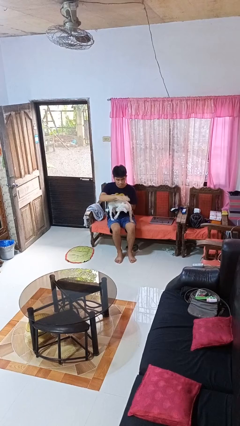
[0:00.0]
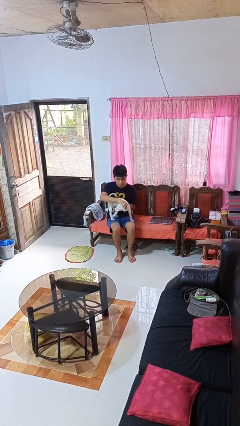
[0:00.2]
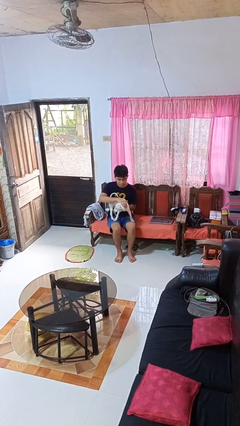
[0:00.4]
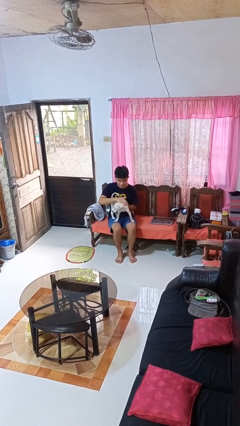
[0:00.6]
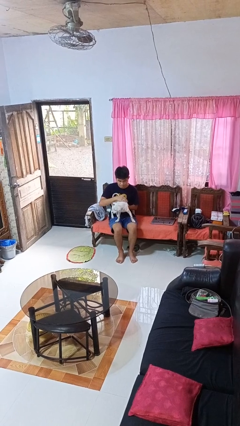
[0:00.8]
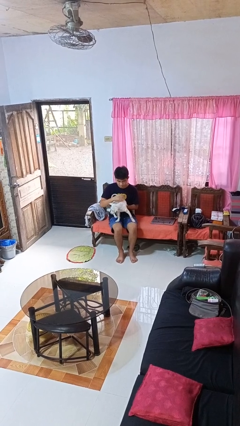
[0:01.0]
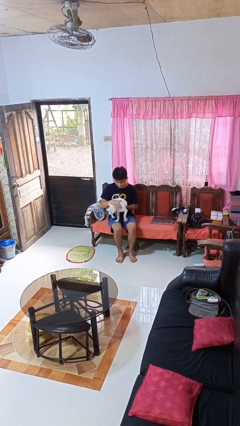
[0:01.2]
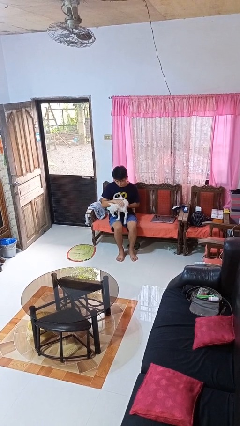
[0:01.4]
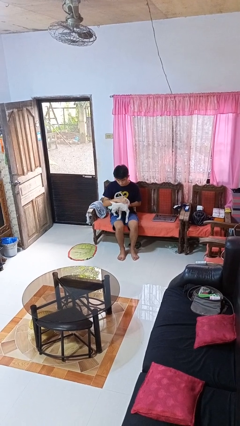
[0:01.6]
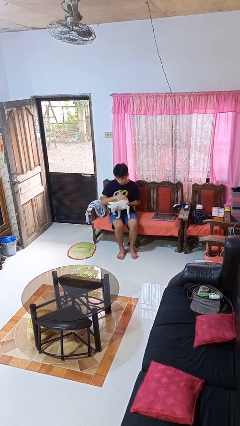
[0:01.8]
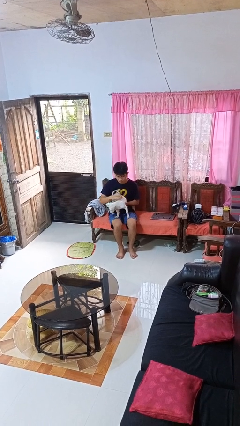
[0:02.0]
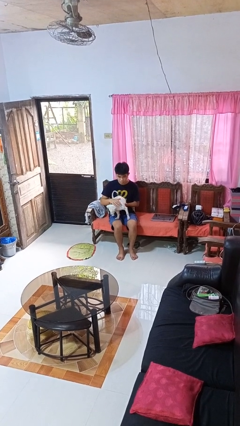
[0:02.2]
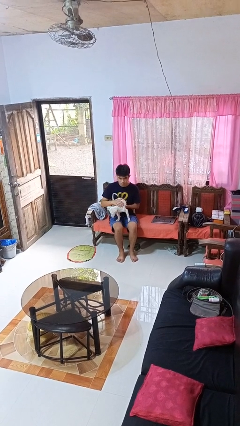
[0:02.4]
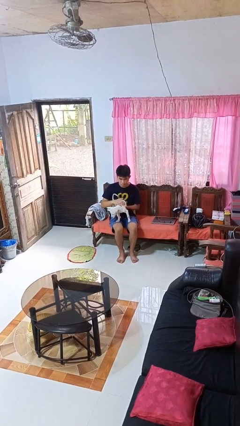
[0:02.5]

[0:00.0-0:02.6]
person pets dog

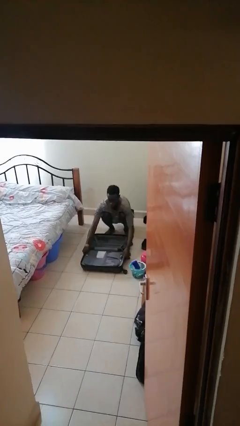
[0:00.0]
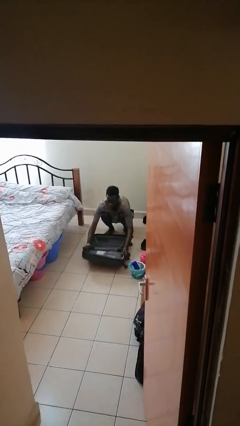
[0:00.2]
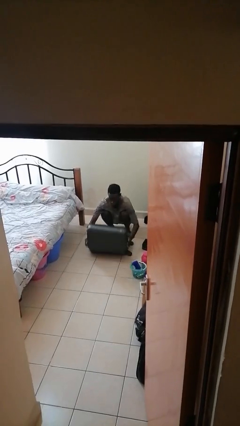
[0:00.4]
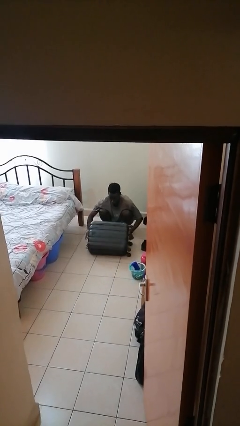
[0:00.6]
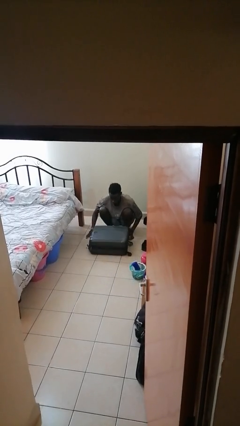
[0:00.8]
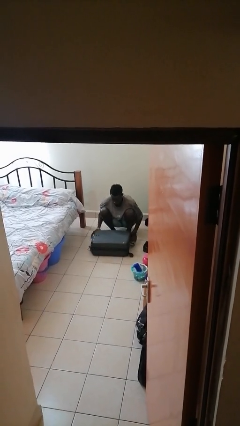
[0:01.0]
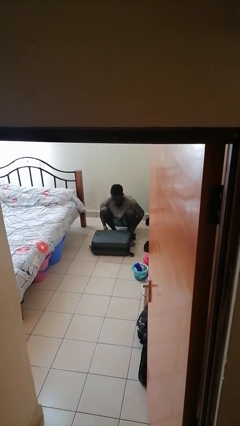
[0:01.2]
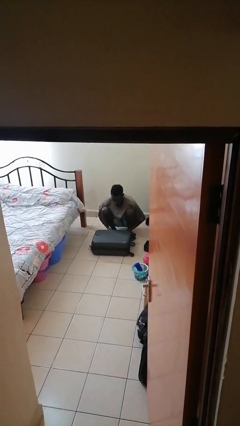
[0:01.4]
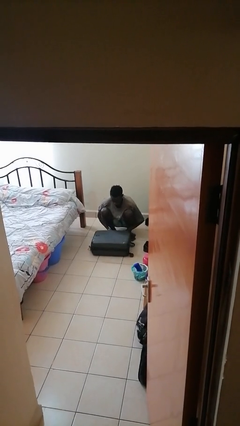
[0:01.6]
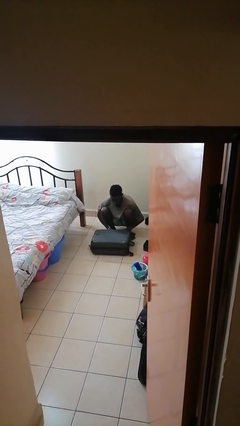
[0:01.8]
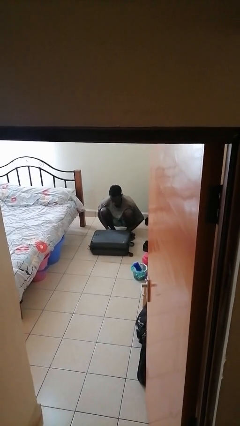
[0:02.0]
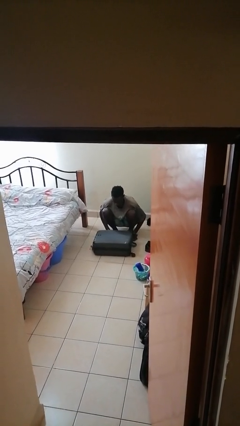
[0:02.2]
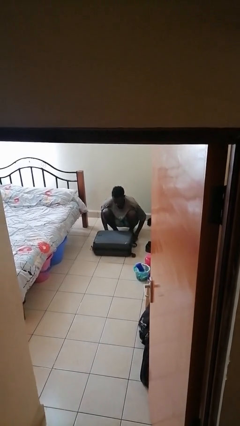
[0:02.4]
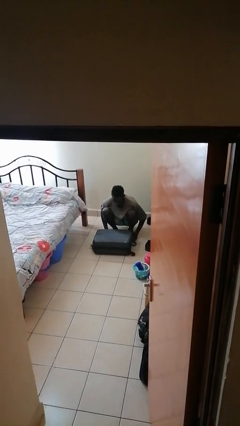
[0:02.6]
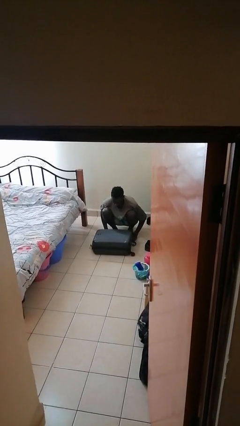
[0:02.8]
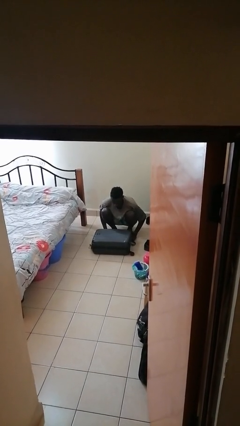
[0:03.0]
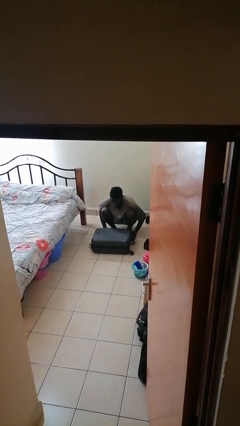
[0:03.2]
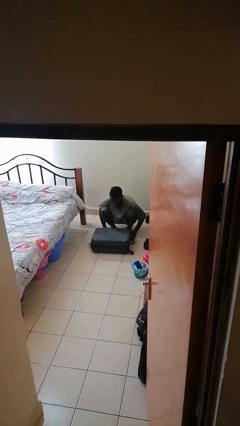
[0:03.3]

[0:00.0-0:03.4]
person closes suitcase

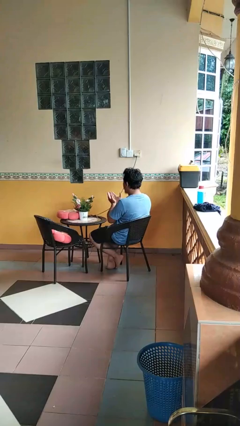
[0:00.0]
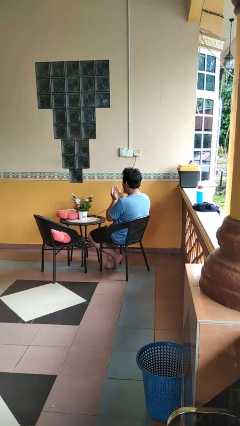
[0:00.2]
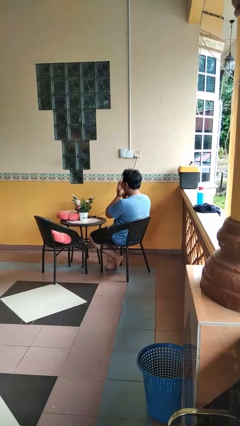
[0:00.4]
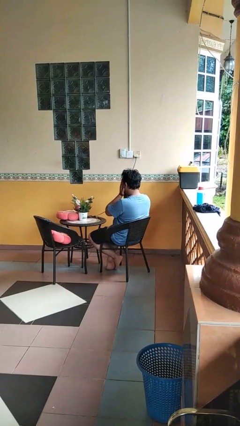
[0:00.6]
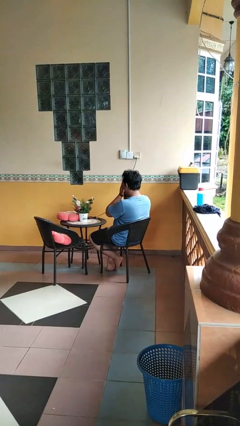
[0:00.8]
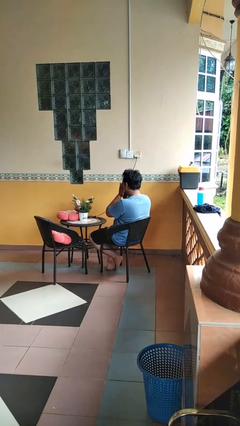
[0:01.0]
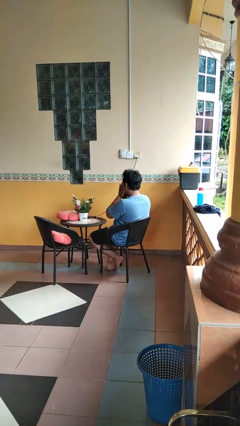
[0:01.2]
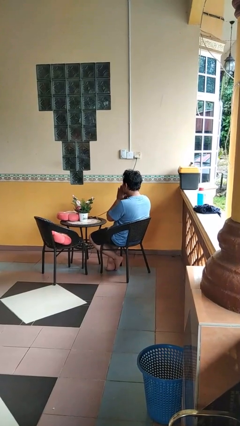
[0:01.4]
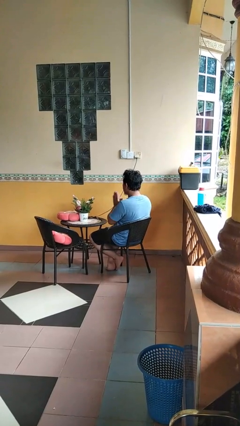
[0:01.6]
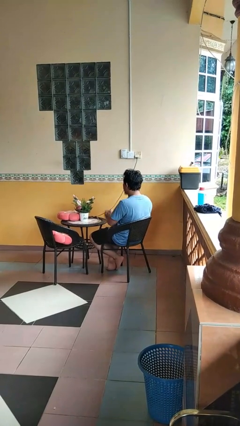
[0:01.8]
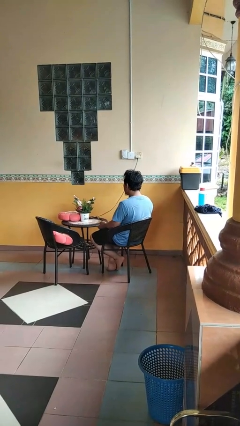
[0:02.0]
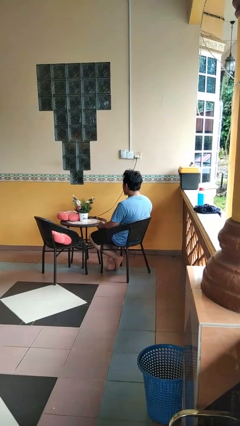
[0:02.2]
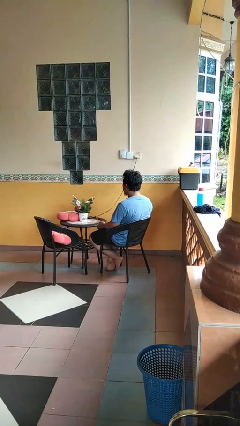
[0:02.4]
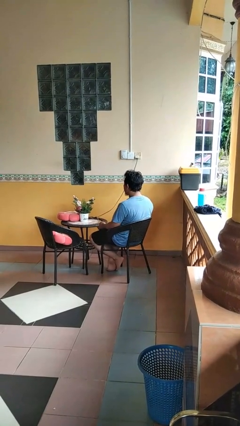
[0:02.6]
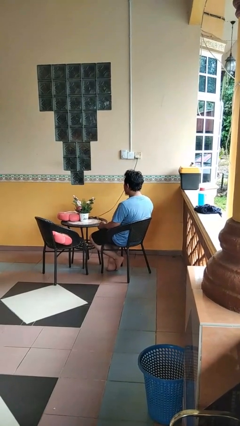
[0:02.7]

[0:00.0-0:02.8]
person prays

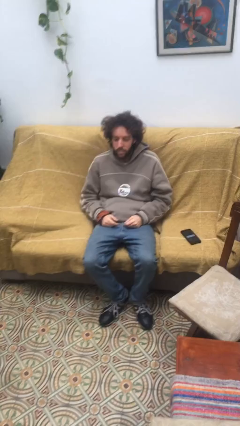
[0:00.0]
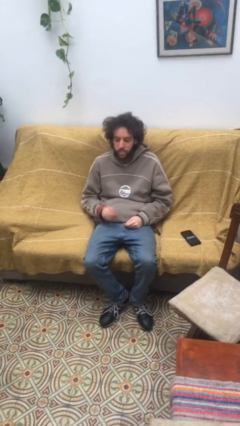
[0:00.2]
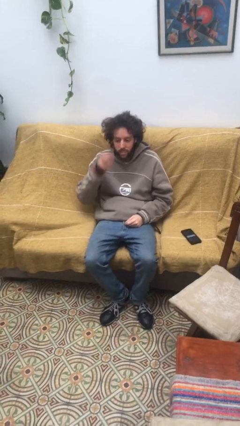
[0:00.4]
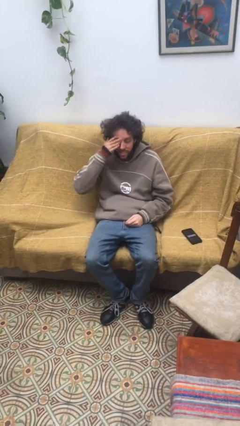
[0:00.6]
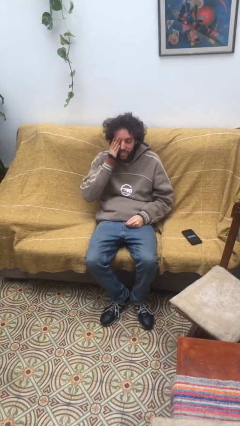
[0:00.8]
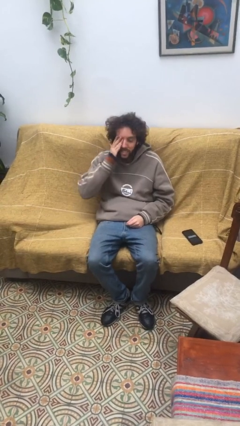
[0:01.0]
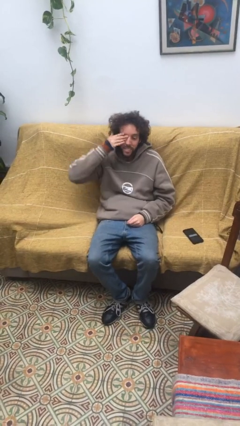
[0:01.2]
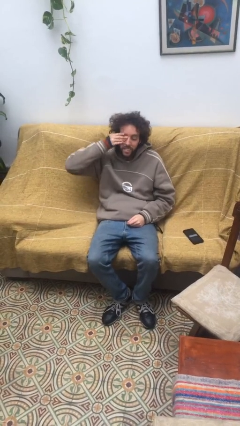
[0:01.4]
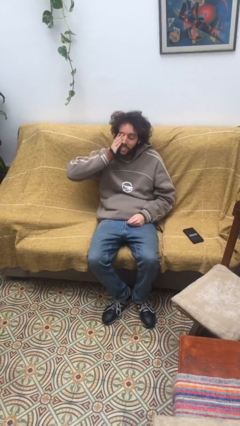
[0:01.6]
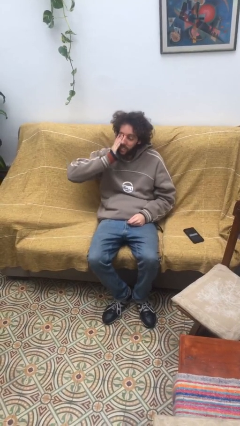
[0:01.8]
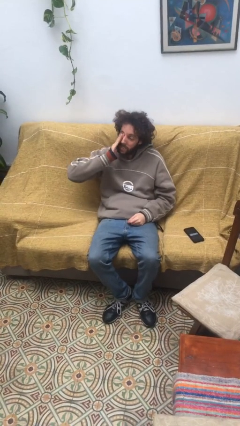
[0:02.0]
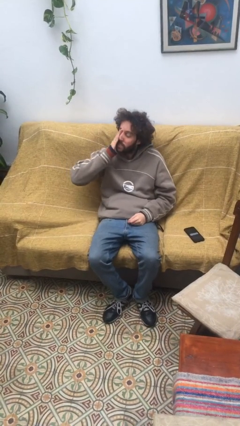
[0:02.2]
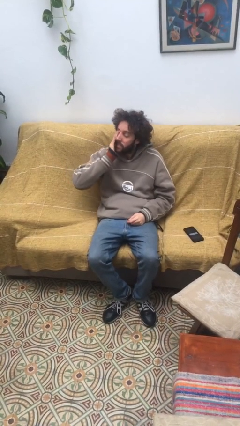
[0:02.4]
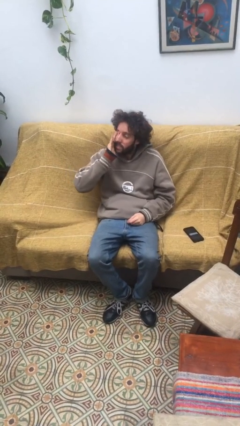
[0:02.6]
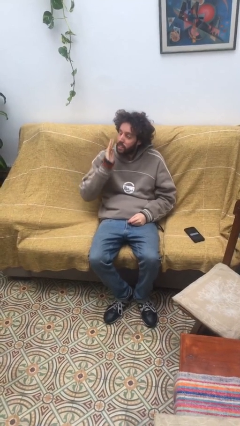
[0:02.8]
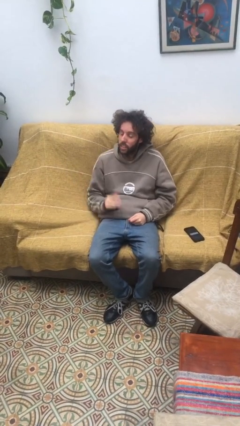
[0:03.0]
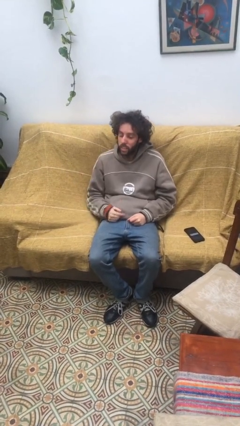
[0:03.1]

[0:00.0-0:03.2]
person rubs eyes

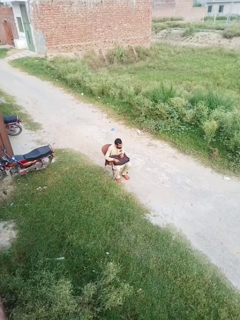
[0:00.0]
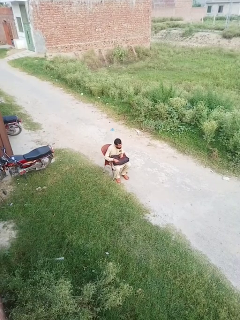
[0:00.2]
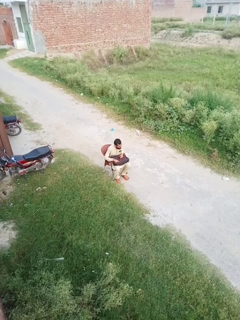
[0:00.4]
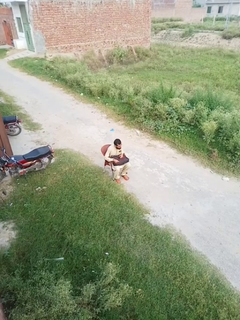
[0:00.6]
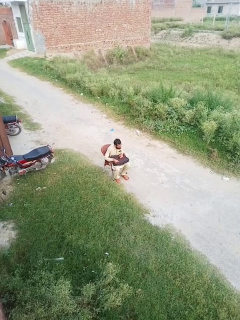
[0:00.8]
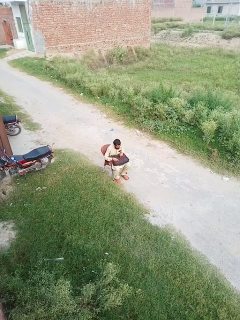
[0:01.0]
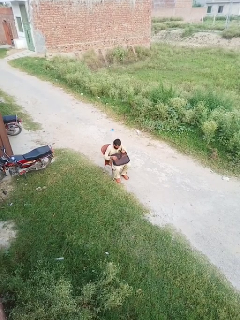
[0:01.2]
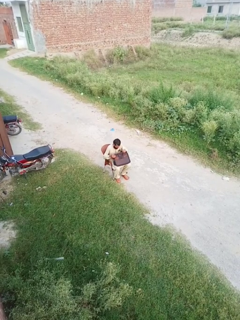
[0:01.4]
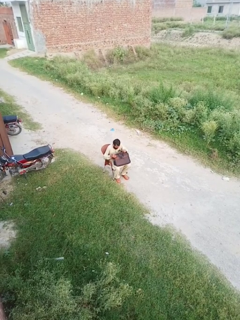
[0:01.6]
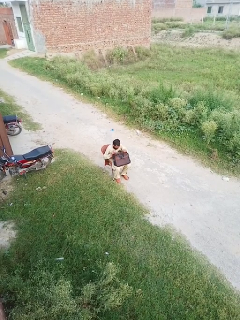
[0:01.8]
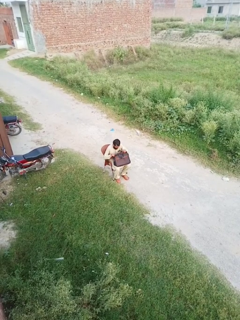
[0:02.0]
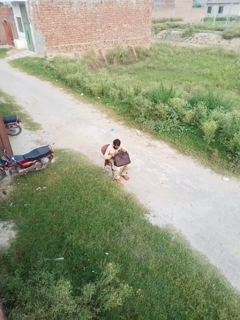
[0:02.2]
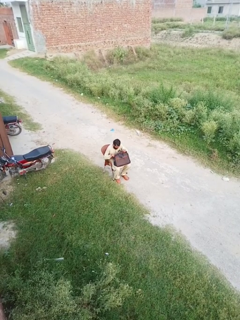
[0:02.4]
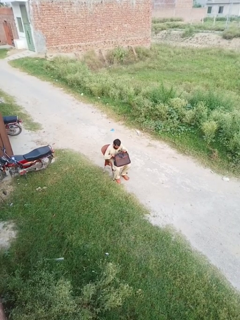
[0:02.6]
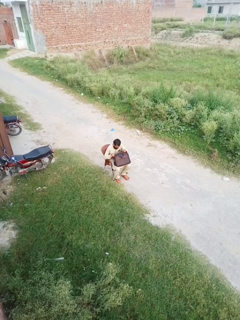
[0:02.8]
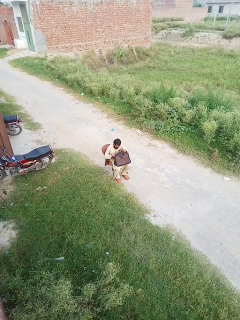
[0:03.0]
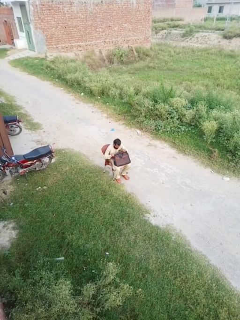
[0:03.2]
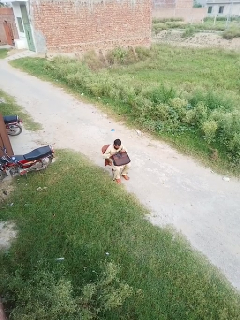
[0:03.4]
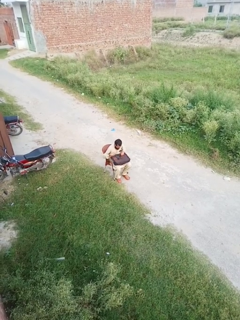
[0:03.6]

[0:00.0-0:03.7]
person searches in bag

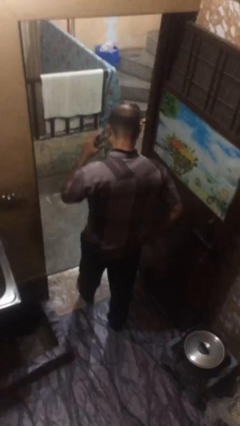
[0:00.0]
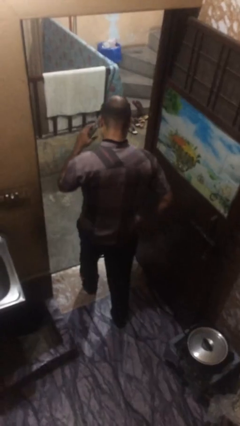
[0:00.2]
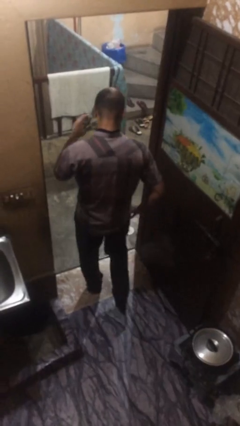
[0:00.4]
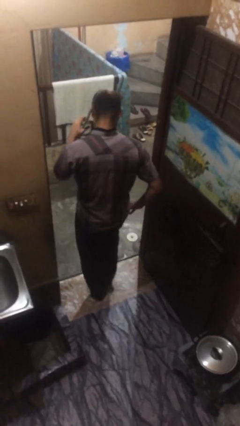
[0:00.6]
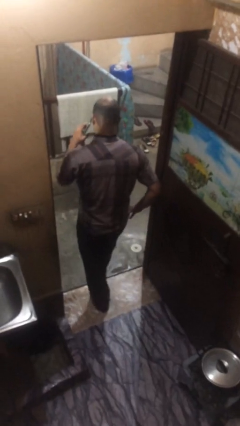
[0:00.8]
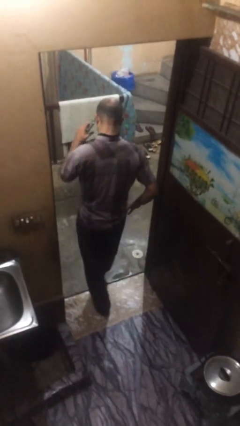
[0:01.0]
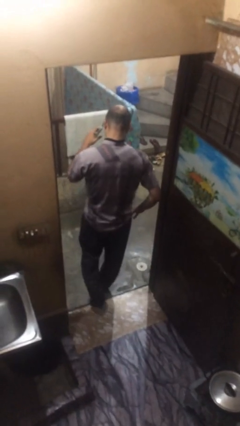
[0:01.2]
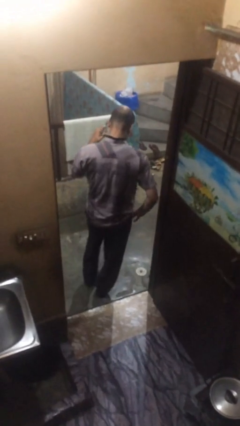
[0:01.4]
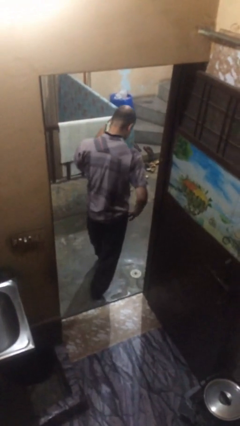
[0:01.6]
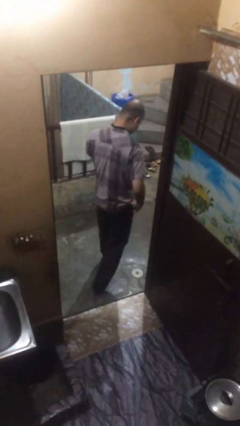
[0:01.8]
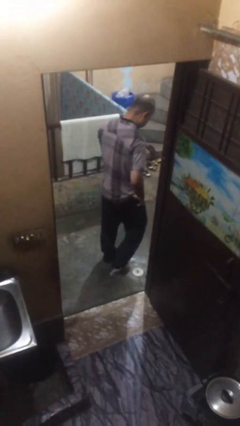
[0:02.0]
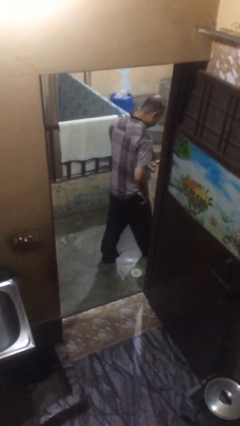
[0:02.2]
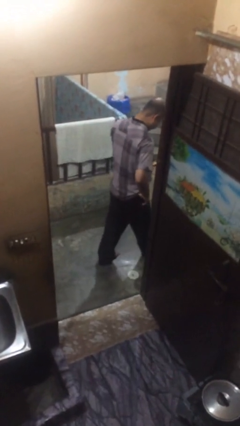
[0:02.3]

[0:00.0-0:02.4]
person exits scene through structure
